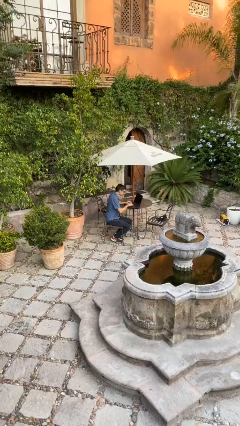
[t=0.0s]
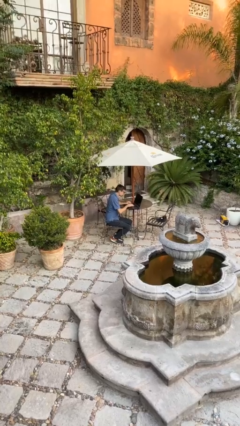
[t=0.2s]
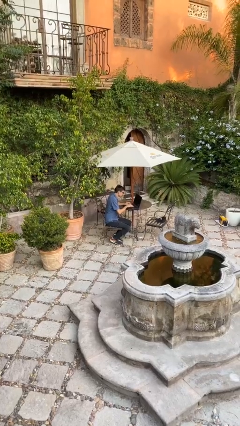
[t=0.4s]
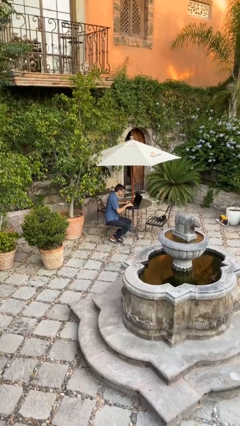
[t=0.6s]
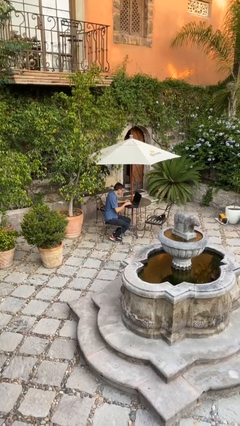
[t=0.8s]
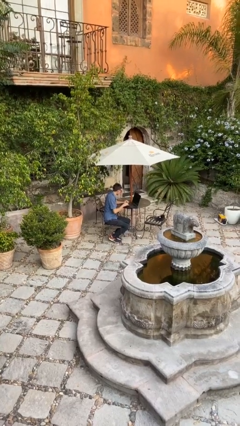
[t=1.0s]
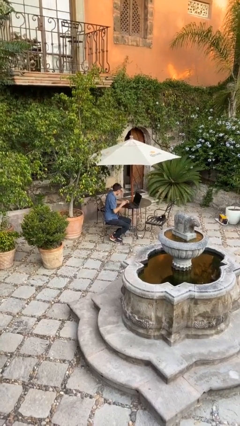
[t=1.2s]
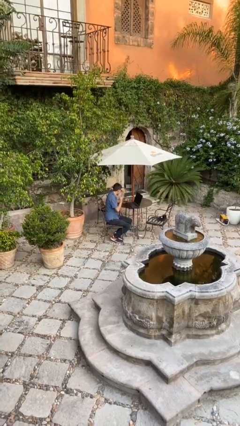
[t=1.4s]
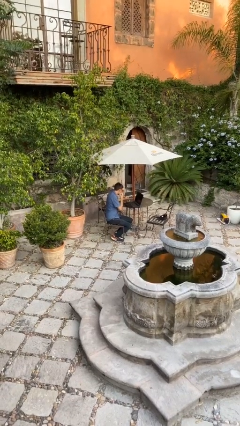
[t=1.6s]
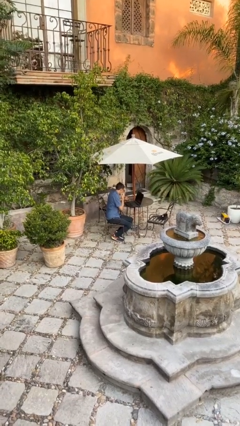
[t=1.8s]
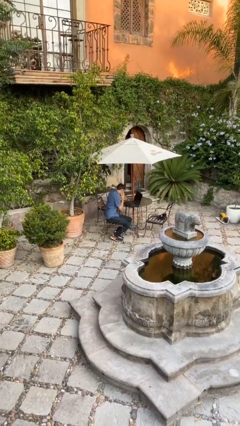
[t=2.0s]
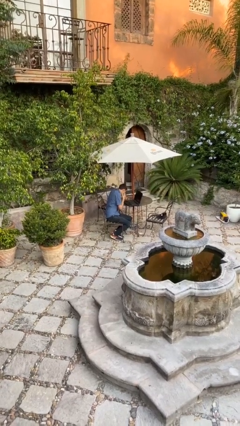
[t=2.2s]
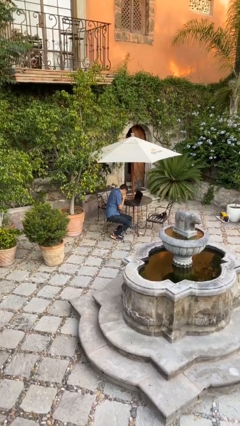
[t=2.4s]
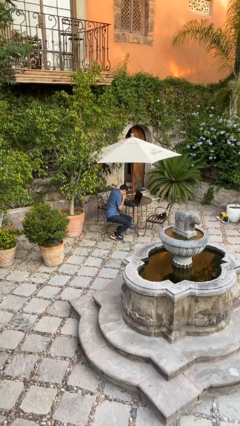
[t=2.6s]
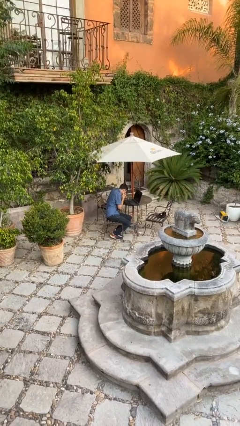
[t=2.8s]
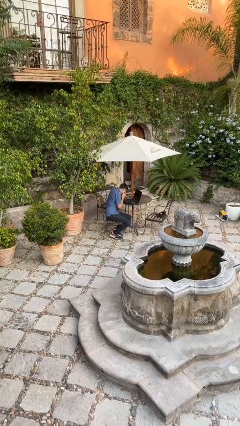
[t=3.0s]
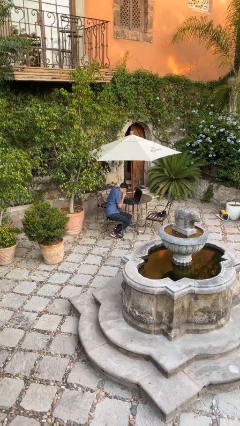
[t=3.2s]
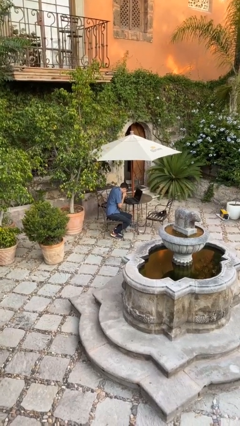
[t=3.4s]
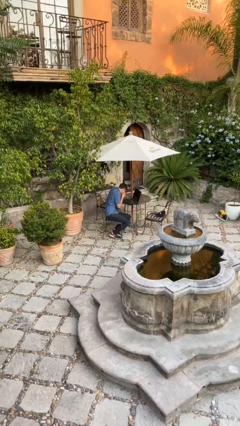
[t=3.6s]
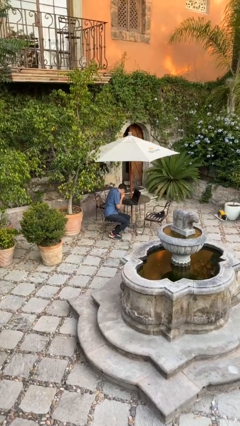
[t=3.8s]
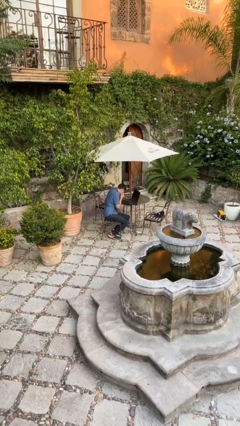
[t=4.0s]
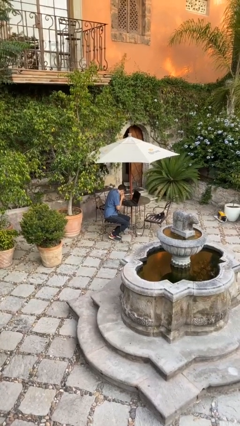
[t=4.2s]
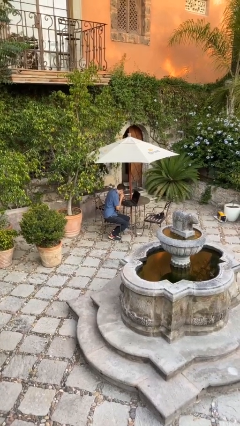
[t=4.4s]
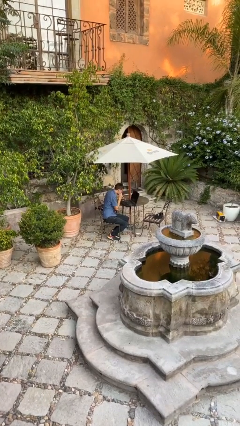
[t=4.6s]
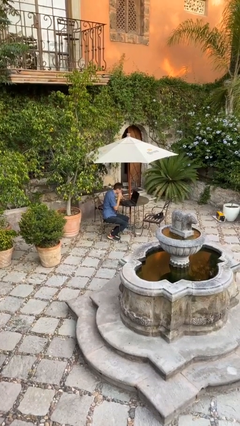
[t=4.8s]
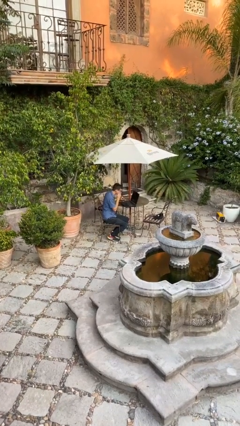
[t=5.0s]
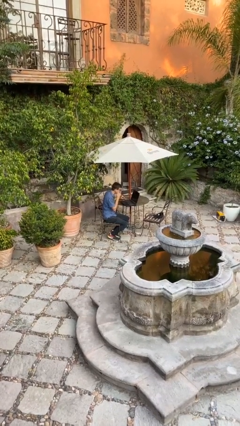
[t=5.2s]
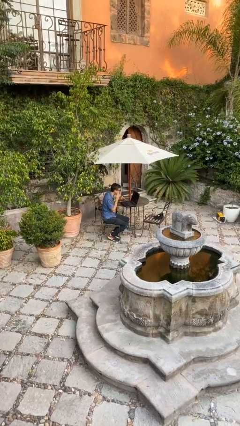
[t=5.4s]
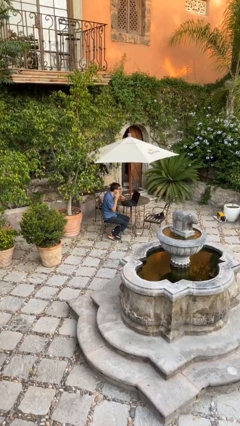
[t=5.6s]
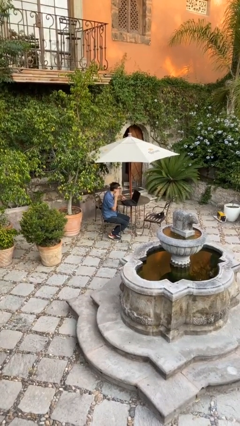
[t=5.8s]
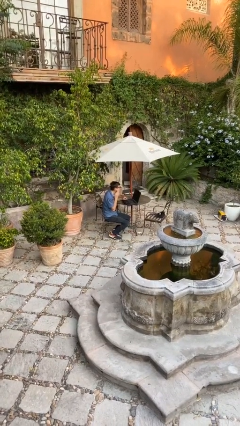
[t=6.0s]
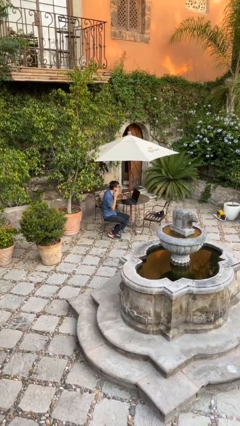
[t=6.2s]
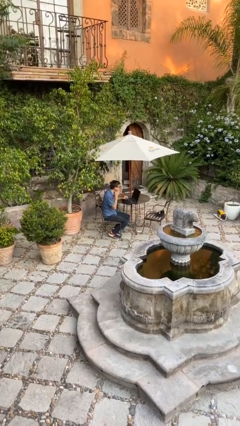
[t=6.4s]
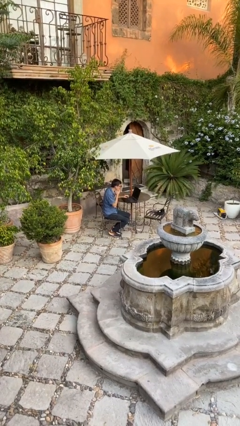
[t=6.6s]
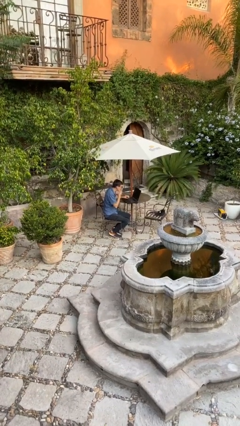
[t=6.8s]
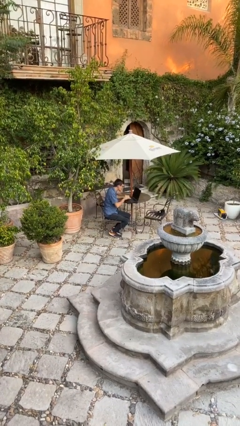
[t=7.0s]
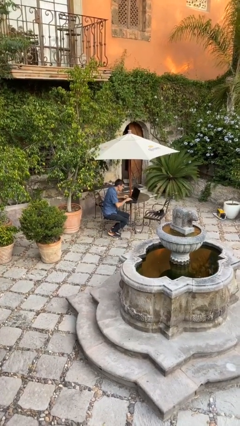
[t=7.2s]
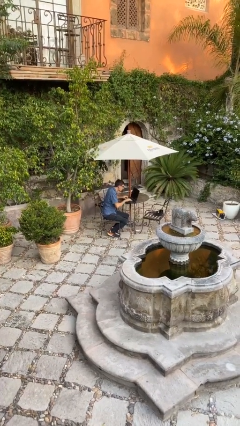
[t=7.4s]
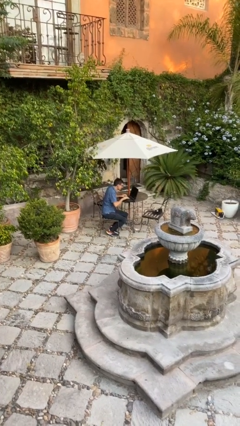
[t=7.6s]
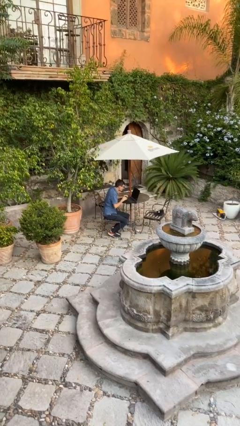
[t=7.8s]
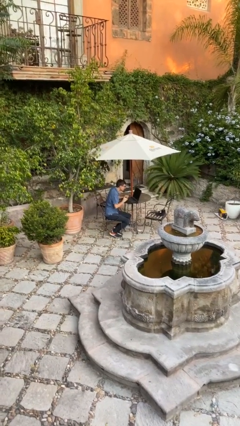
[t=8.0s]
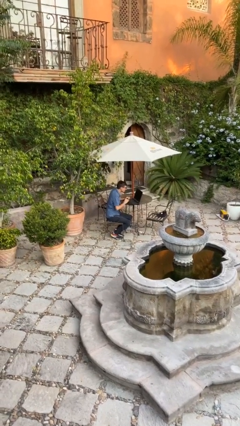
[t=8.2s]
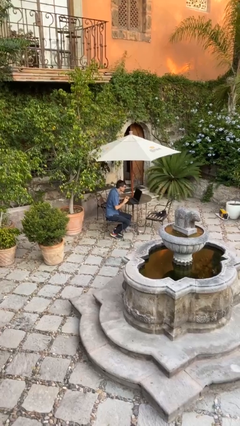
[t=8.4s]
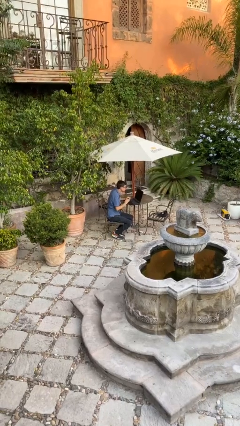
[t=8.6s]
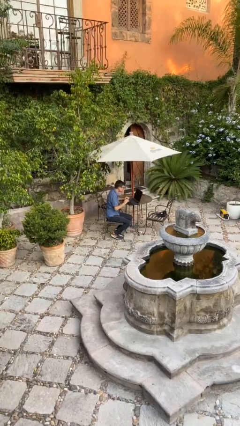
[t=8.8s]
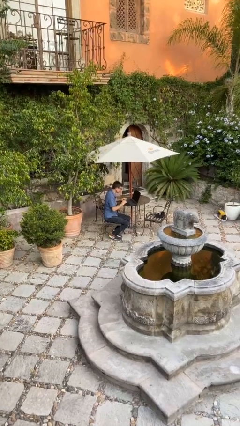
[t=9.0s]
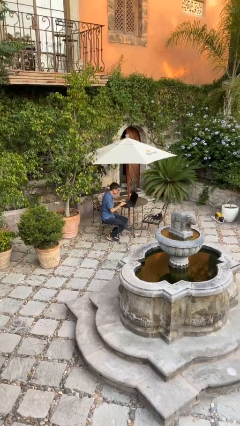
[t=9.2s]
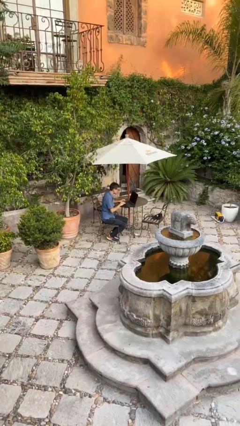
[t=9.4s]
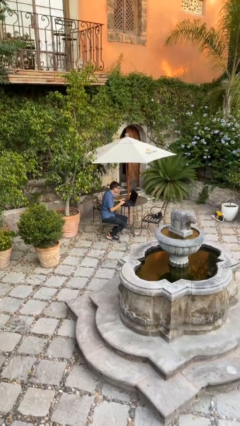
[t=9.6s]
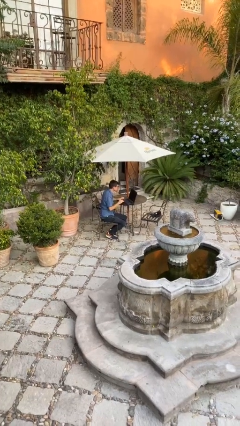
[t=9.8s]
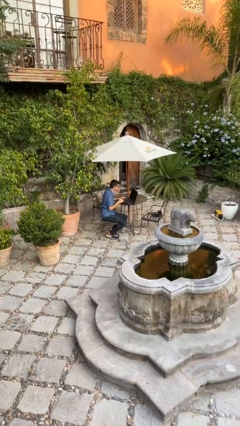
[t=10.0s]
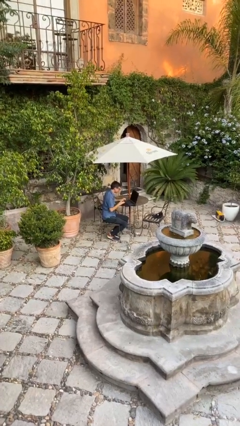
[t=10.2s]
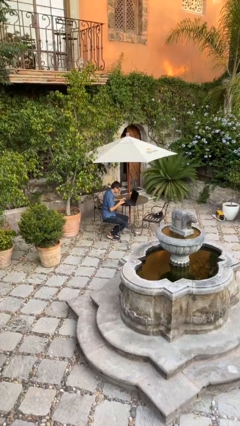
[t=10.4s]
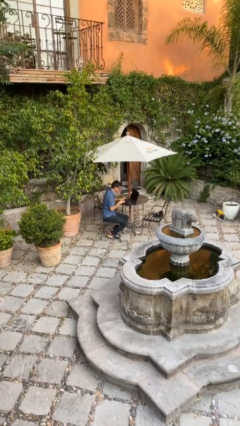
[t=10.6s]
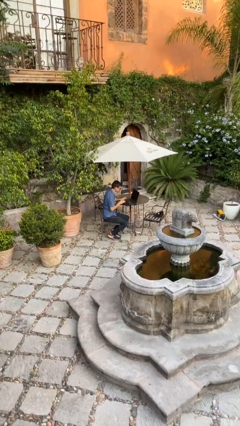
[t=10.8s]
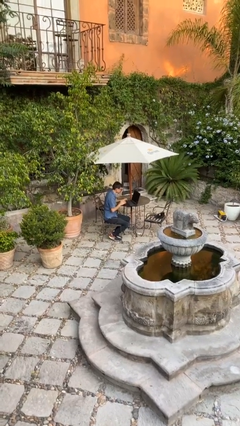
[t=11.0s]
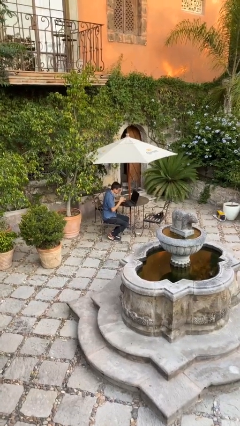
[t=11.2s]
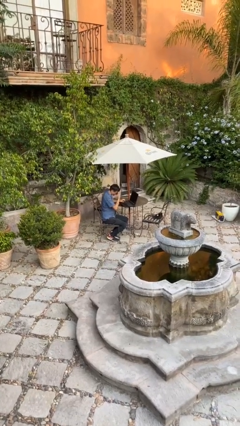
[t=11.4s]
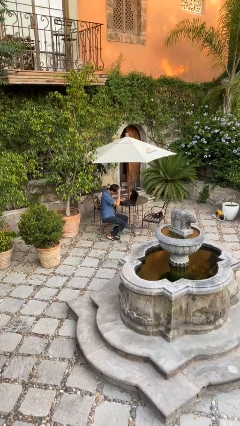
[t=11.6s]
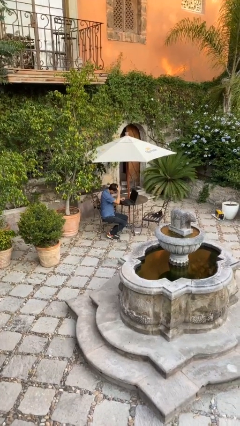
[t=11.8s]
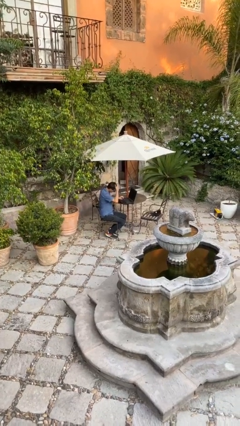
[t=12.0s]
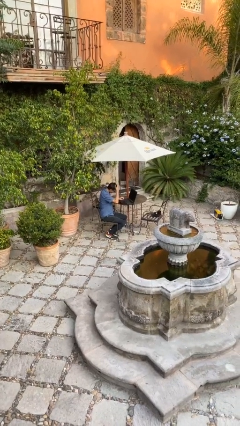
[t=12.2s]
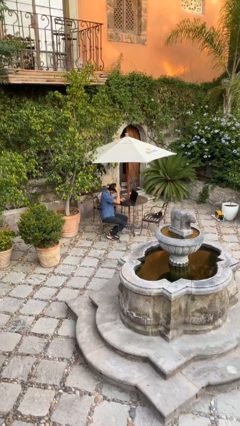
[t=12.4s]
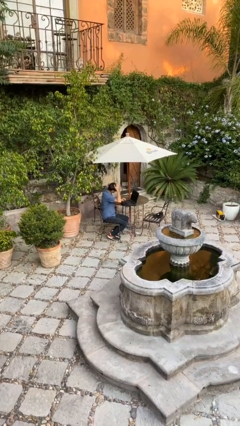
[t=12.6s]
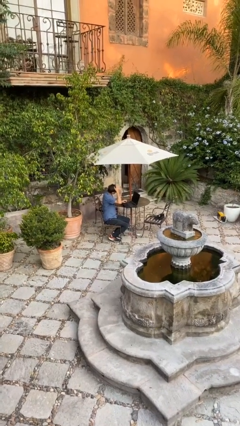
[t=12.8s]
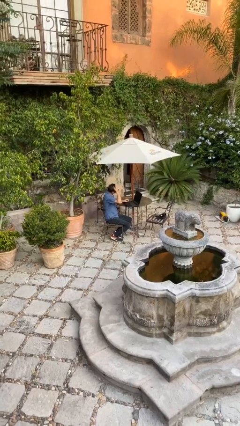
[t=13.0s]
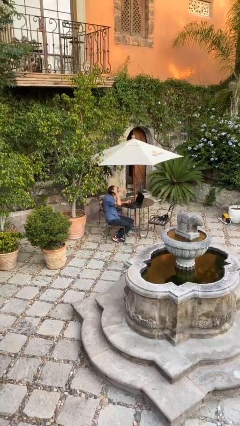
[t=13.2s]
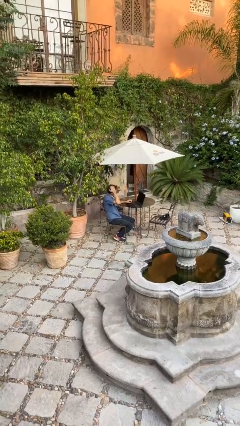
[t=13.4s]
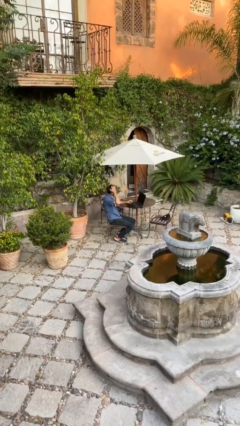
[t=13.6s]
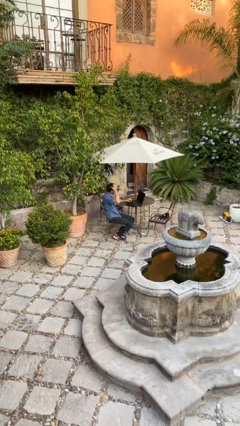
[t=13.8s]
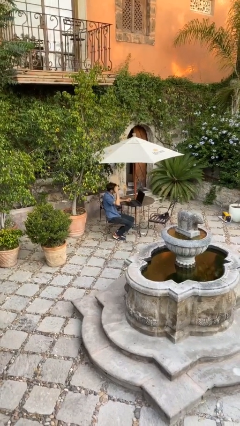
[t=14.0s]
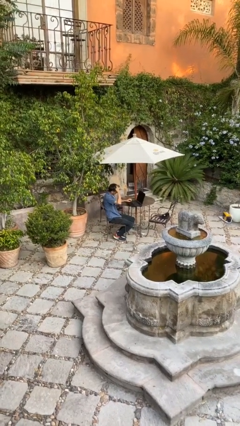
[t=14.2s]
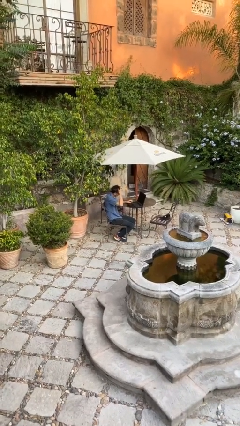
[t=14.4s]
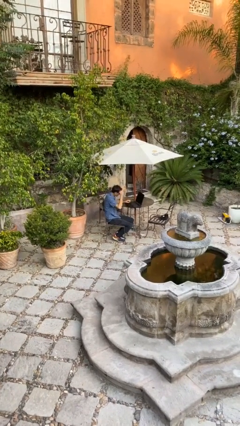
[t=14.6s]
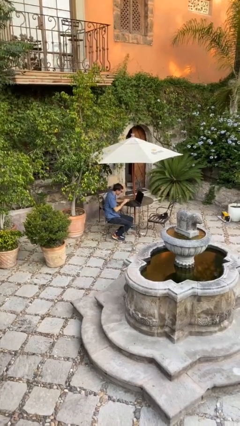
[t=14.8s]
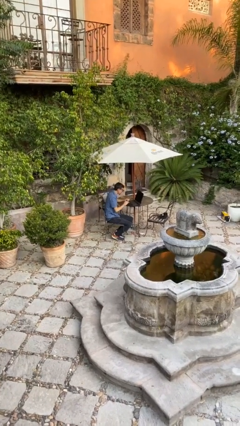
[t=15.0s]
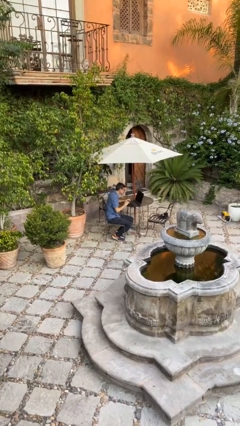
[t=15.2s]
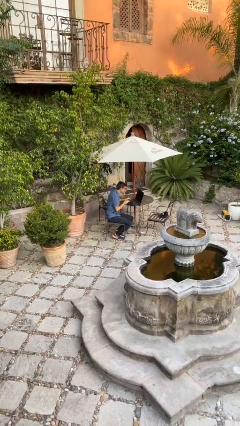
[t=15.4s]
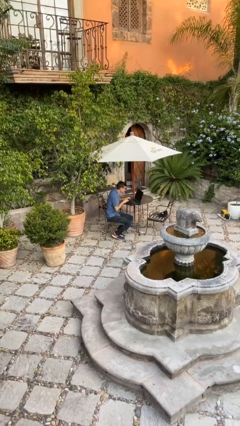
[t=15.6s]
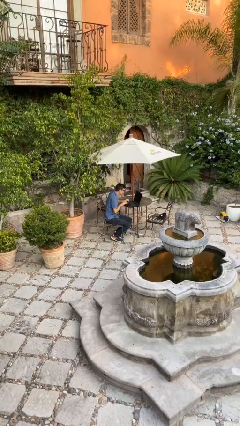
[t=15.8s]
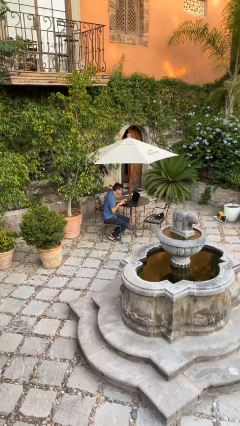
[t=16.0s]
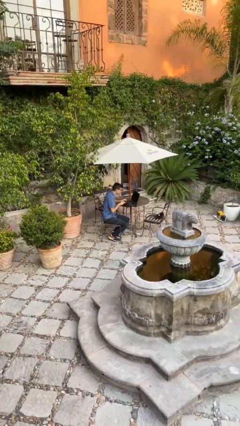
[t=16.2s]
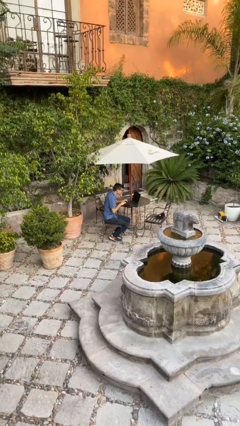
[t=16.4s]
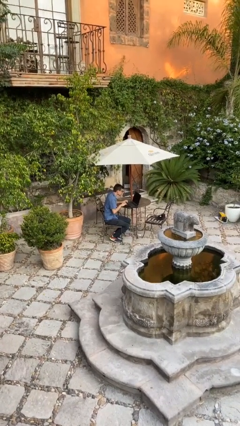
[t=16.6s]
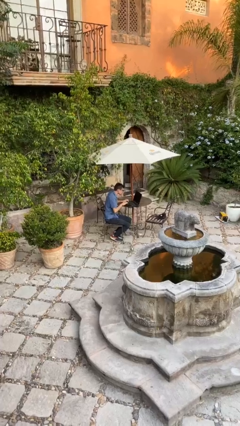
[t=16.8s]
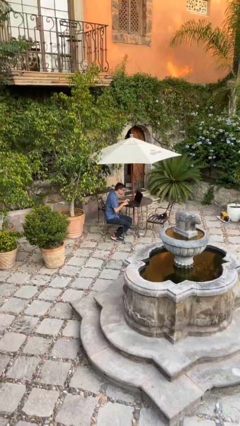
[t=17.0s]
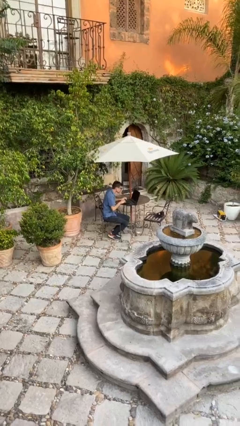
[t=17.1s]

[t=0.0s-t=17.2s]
person interacts with laptop

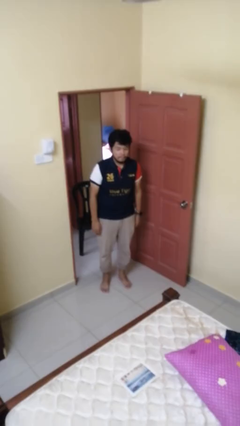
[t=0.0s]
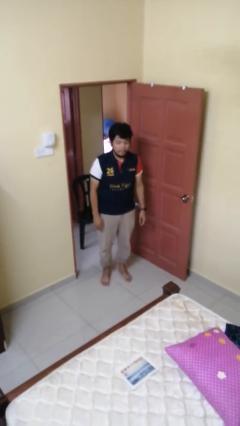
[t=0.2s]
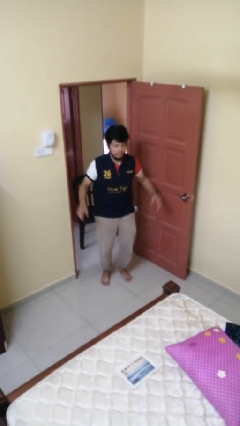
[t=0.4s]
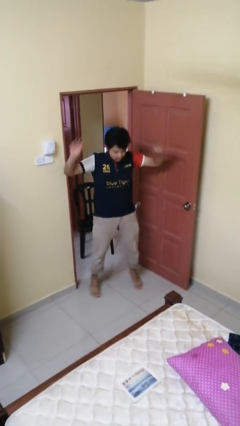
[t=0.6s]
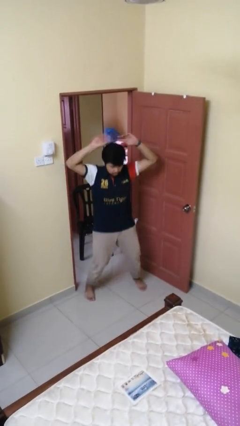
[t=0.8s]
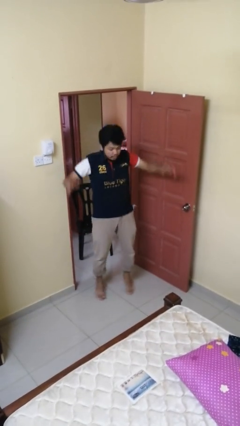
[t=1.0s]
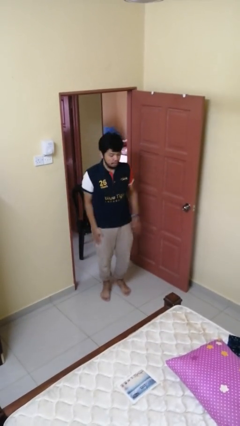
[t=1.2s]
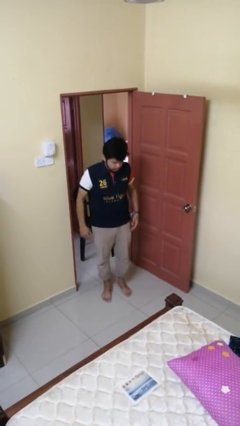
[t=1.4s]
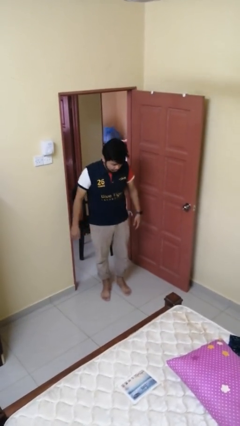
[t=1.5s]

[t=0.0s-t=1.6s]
person exercises with jumping jacks
